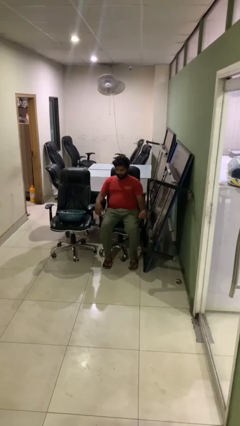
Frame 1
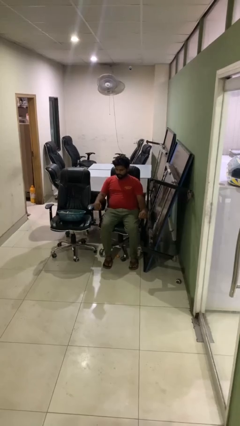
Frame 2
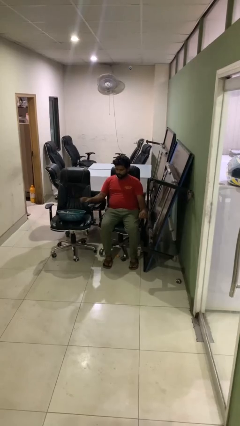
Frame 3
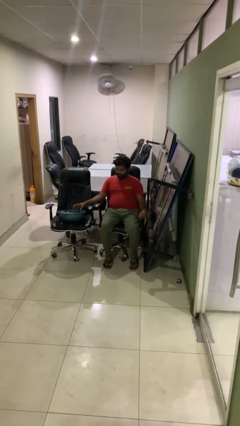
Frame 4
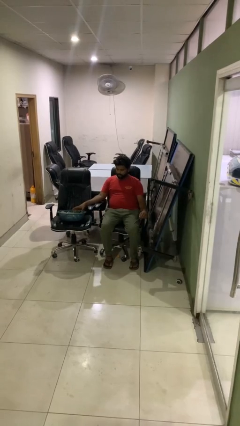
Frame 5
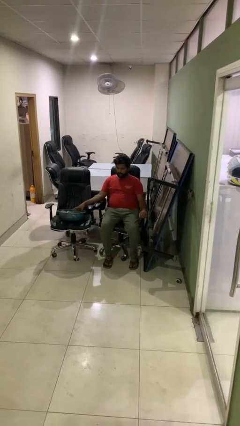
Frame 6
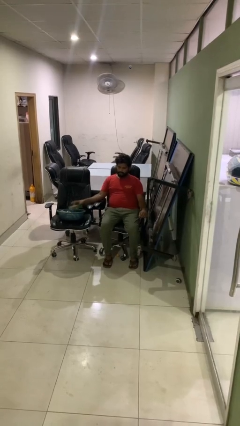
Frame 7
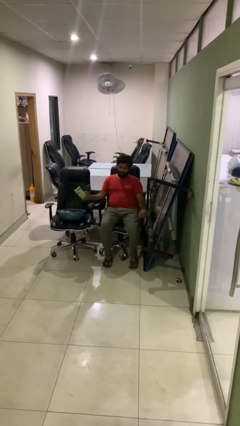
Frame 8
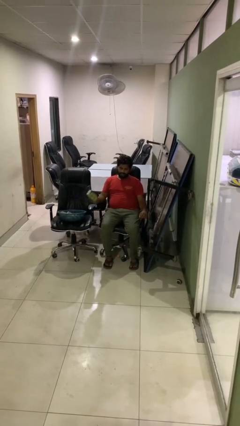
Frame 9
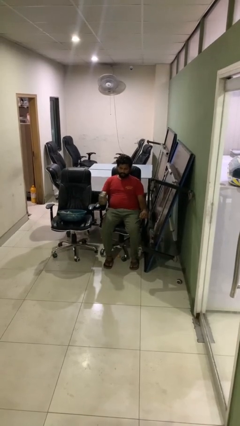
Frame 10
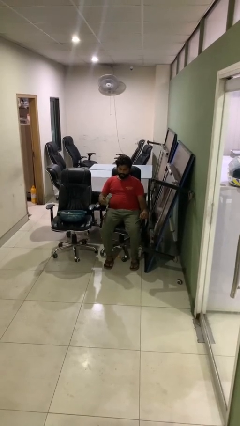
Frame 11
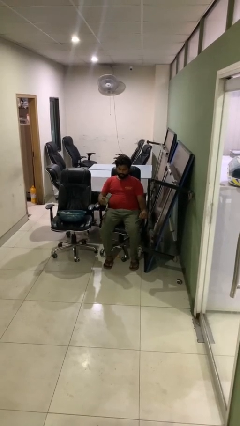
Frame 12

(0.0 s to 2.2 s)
person takes object from basket

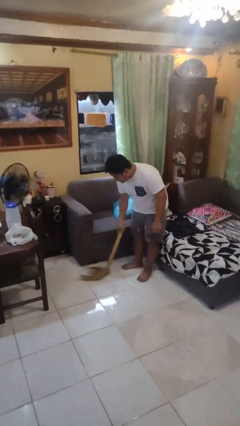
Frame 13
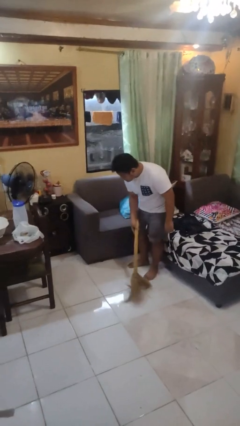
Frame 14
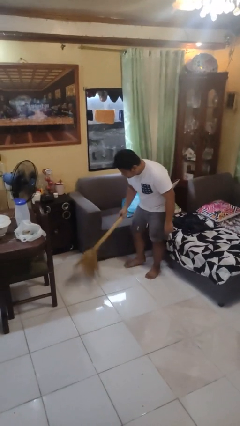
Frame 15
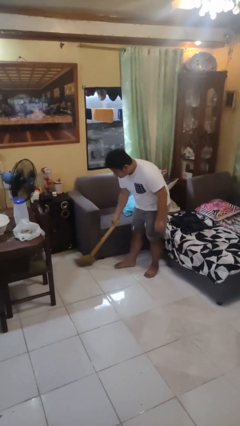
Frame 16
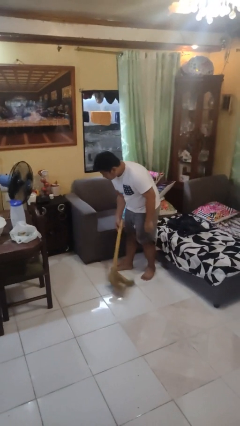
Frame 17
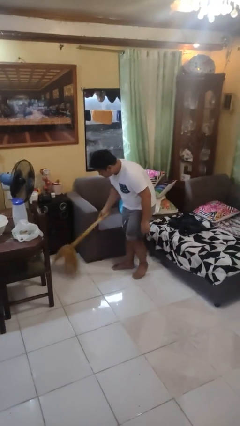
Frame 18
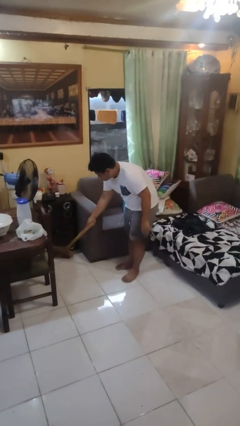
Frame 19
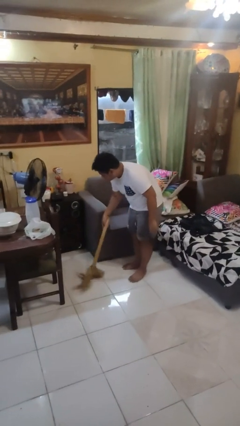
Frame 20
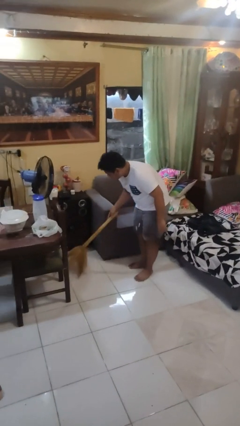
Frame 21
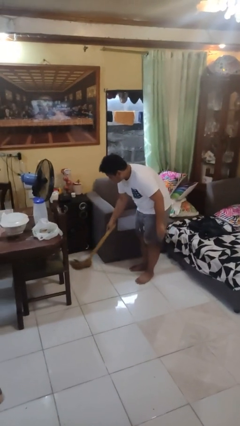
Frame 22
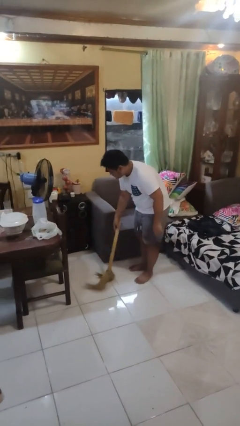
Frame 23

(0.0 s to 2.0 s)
person sweeps floor

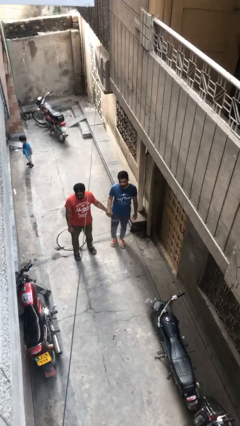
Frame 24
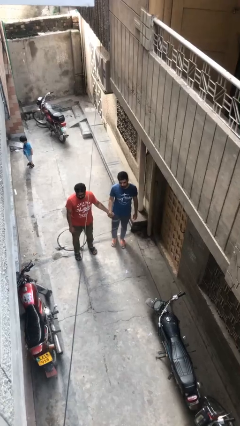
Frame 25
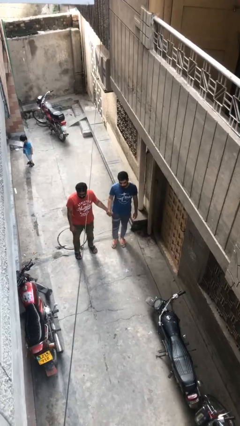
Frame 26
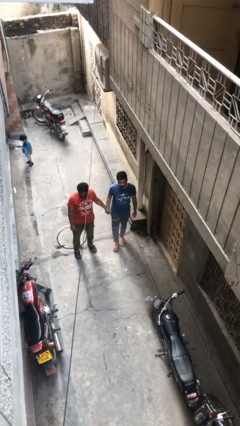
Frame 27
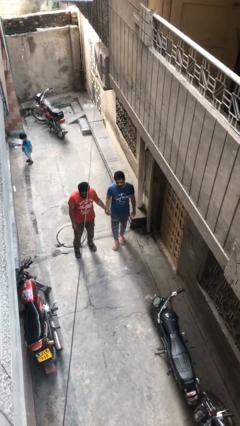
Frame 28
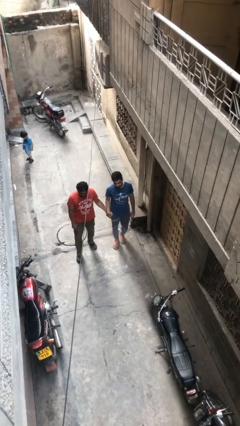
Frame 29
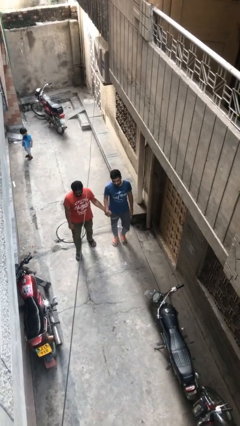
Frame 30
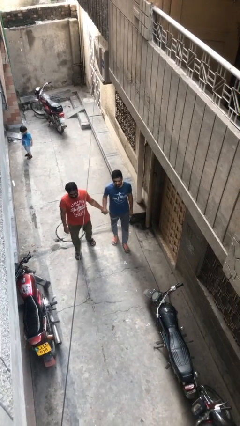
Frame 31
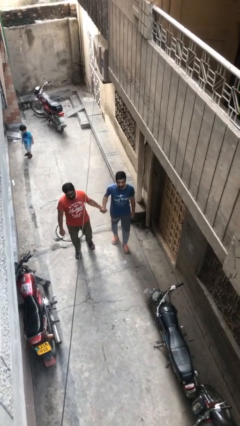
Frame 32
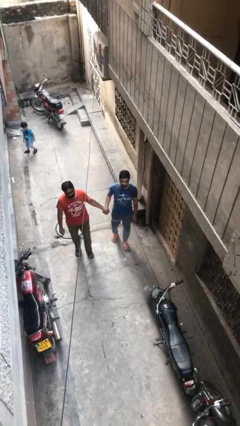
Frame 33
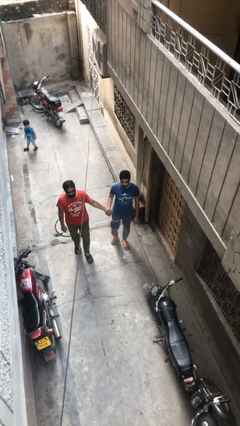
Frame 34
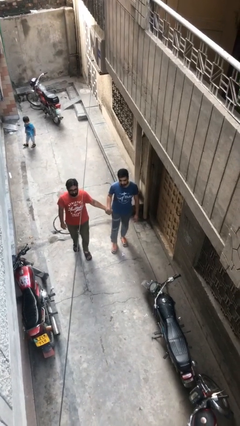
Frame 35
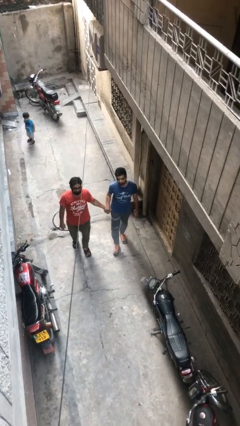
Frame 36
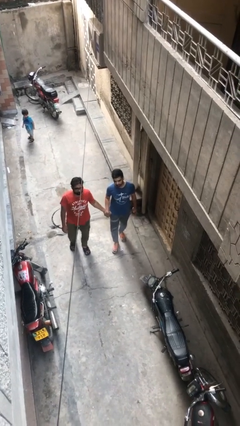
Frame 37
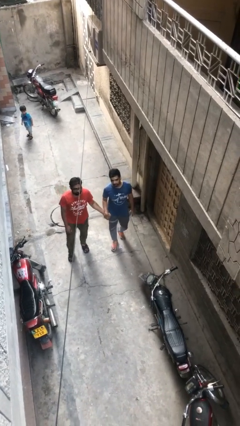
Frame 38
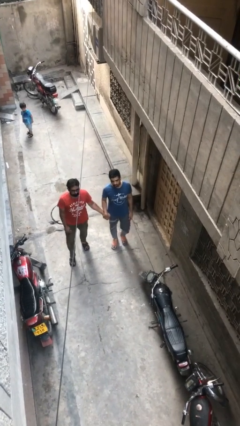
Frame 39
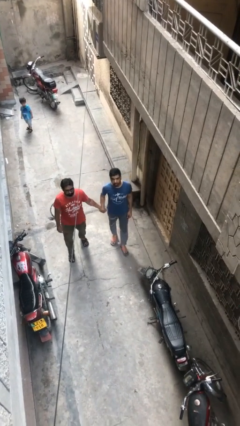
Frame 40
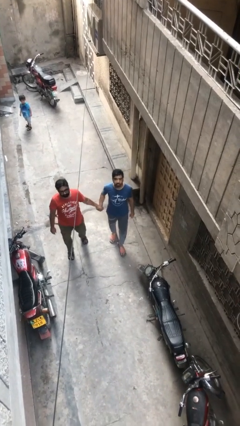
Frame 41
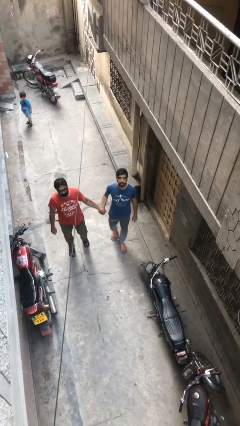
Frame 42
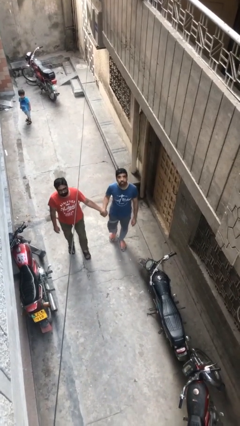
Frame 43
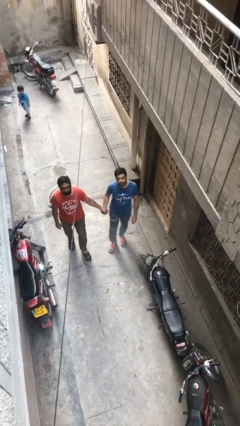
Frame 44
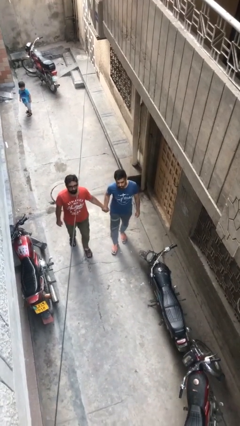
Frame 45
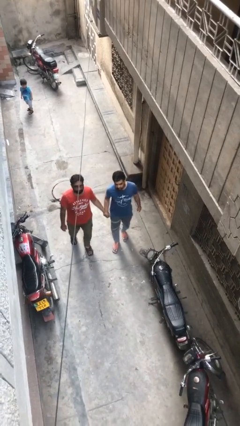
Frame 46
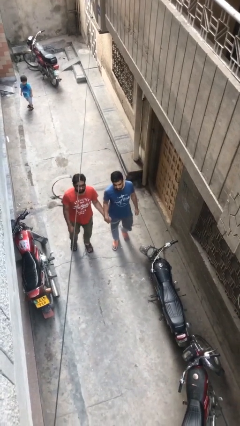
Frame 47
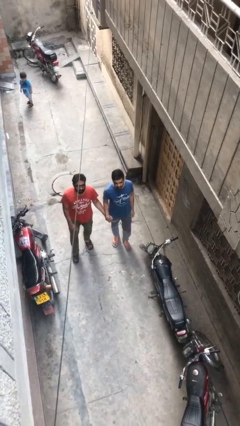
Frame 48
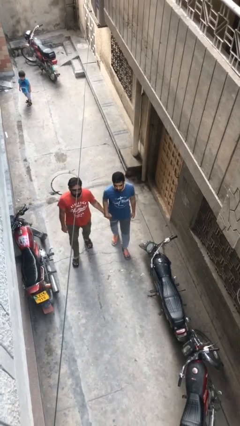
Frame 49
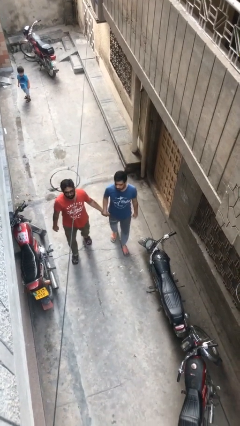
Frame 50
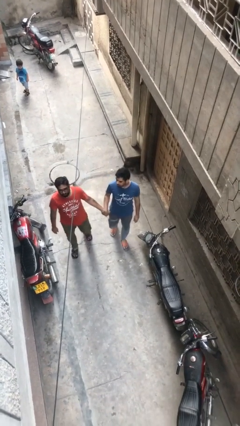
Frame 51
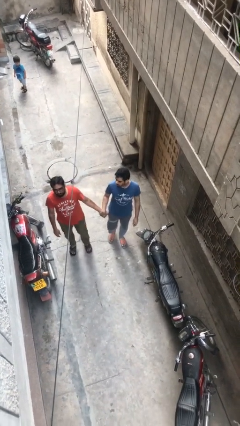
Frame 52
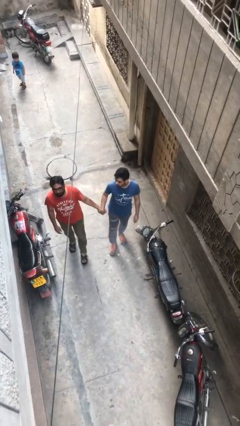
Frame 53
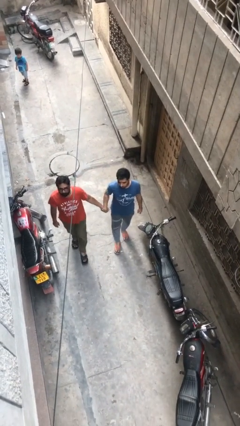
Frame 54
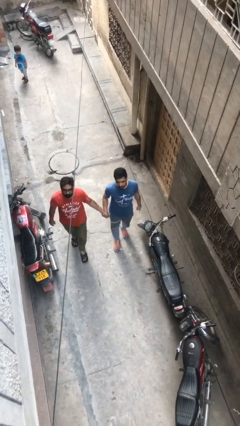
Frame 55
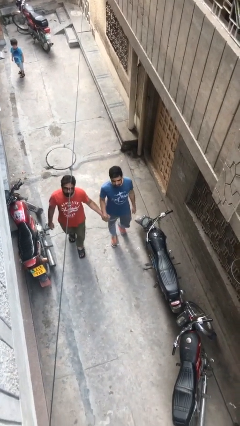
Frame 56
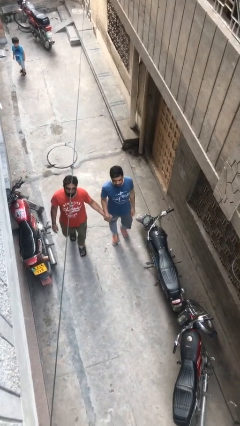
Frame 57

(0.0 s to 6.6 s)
person holds hand

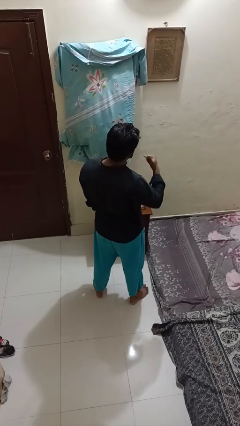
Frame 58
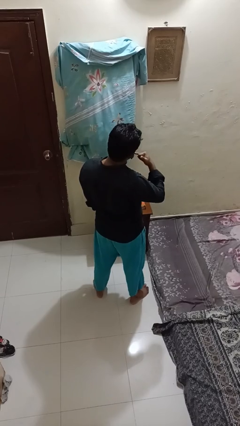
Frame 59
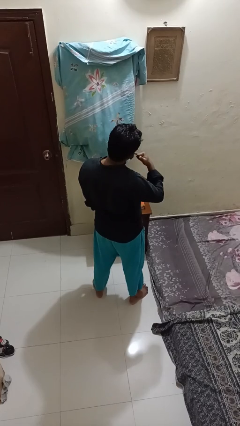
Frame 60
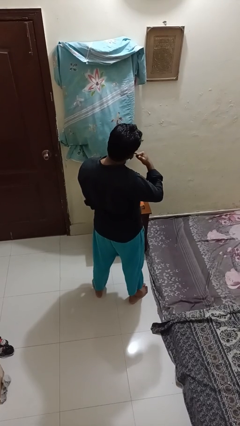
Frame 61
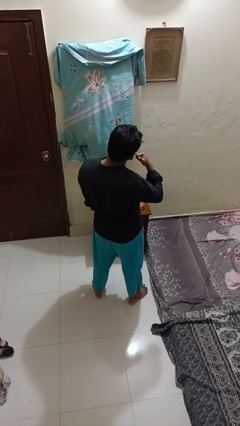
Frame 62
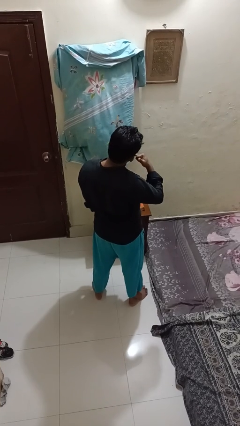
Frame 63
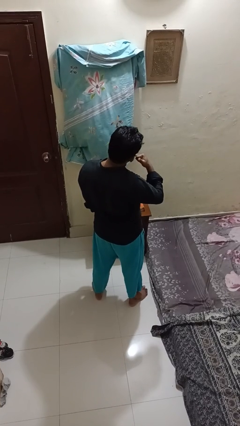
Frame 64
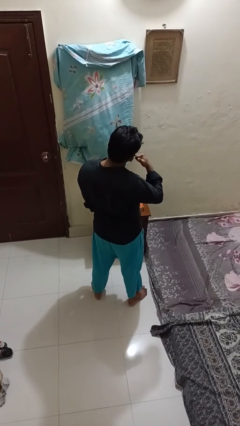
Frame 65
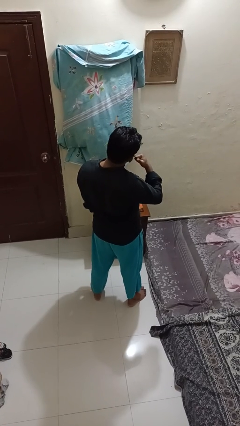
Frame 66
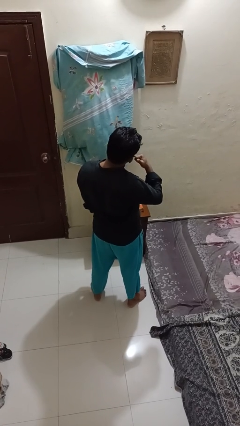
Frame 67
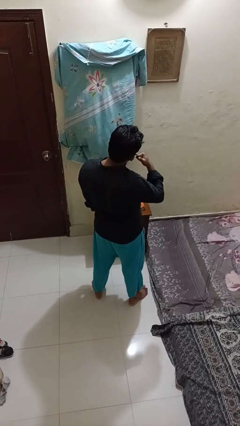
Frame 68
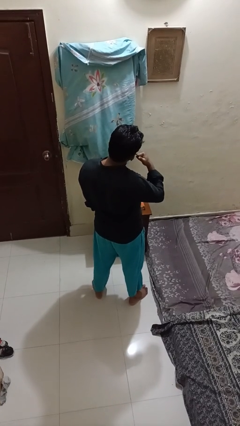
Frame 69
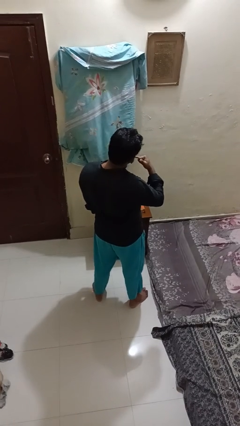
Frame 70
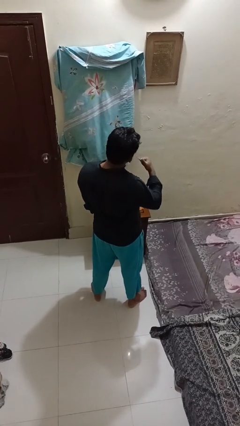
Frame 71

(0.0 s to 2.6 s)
person gestures call me

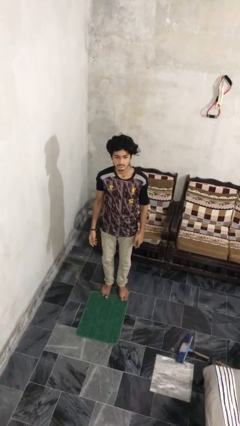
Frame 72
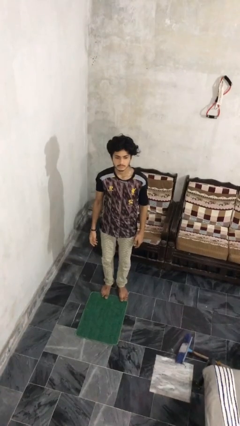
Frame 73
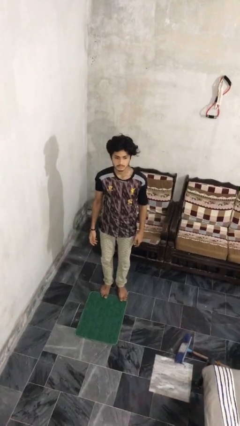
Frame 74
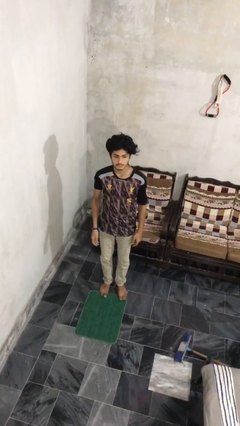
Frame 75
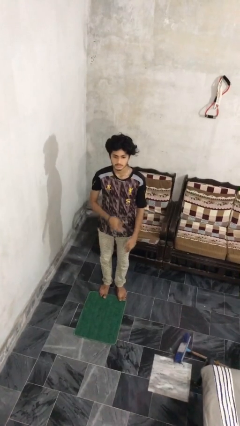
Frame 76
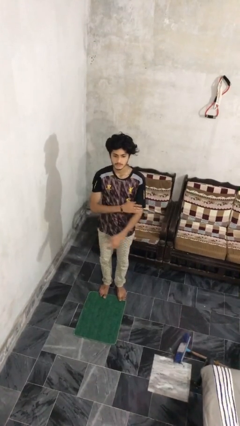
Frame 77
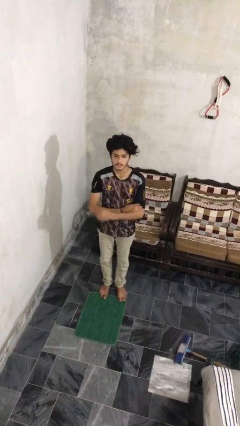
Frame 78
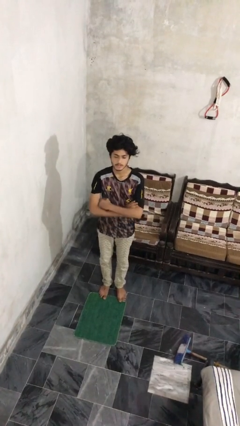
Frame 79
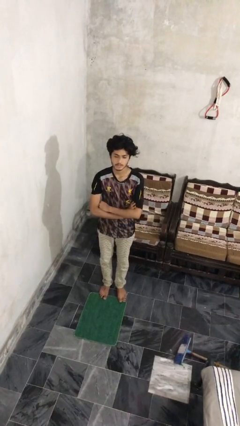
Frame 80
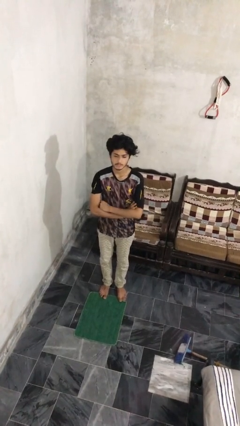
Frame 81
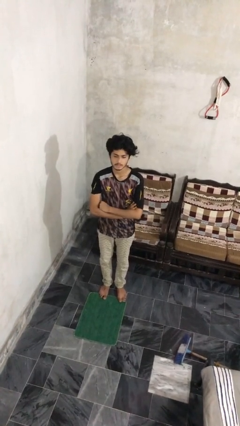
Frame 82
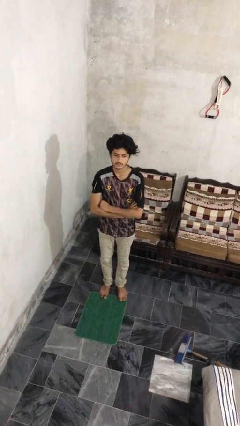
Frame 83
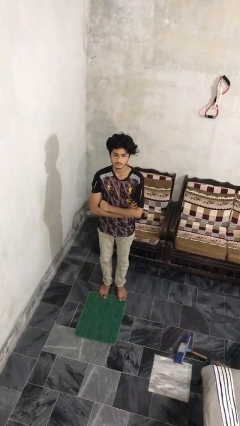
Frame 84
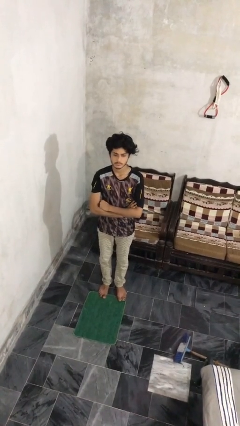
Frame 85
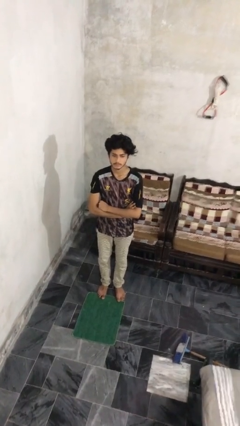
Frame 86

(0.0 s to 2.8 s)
person crosses arms

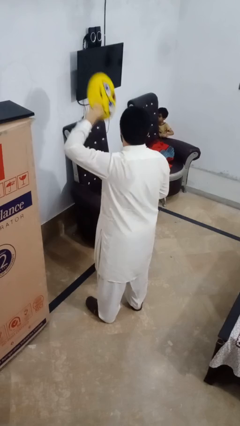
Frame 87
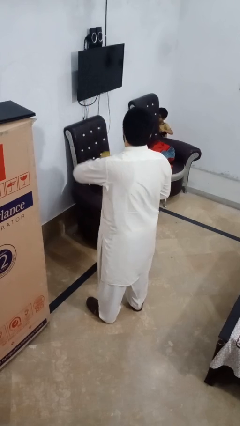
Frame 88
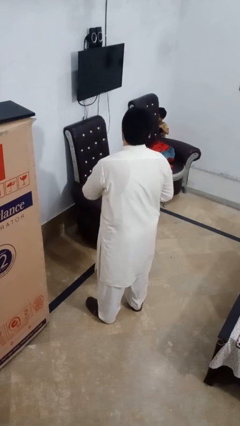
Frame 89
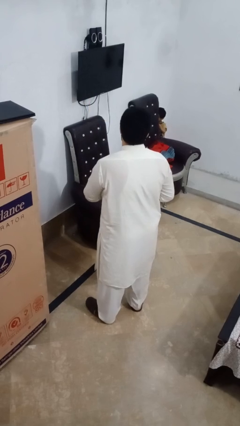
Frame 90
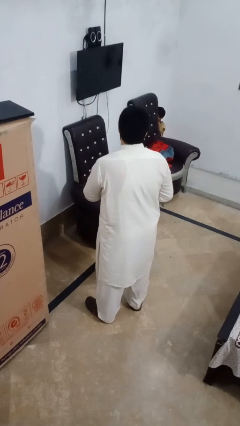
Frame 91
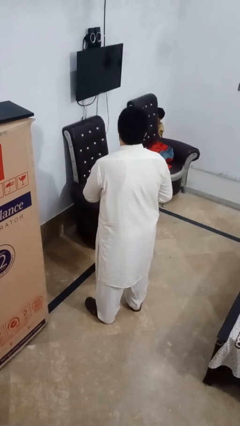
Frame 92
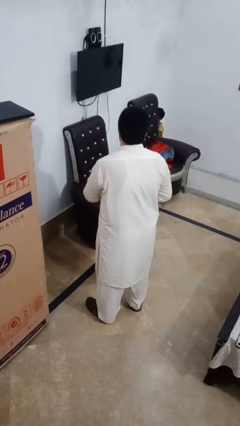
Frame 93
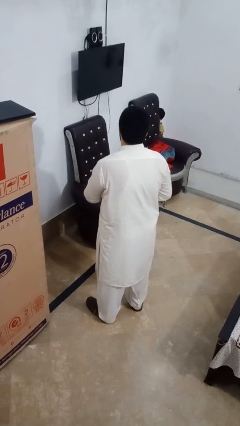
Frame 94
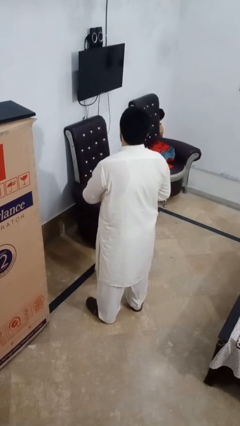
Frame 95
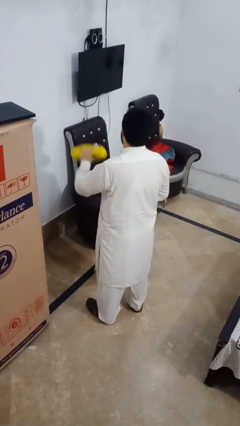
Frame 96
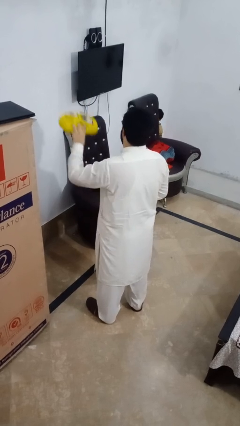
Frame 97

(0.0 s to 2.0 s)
person picks up object from shelf
